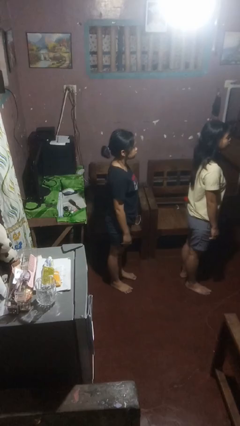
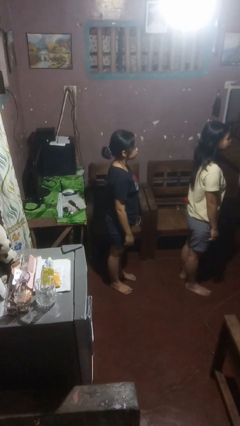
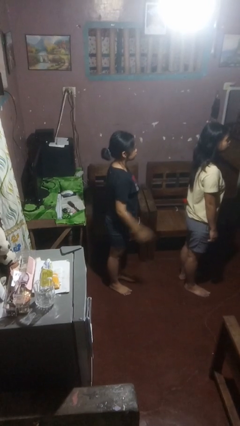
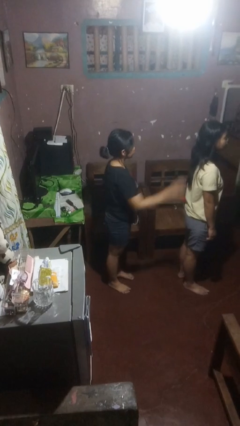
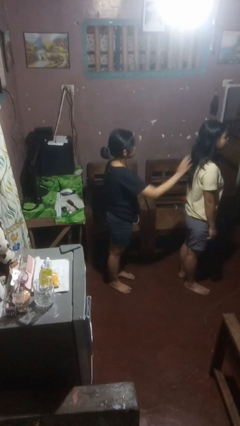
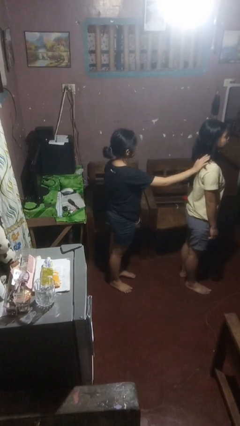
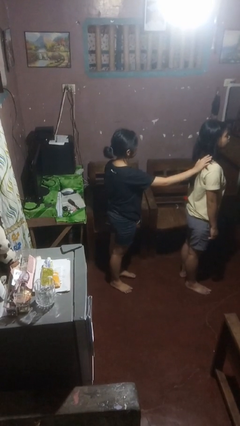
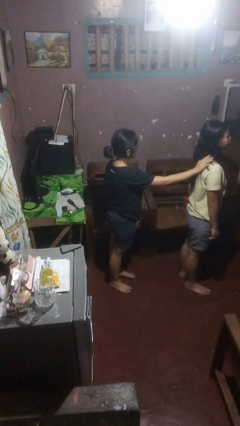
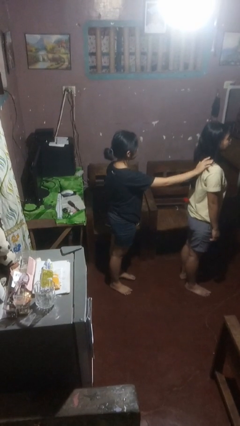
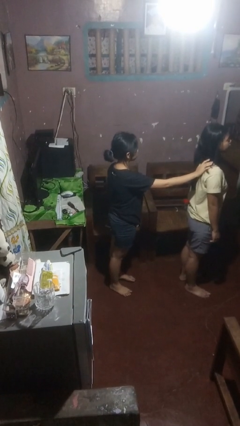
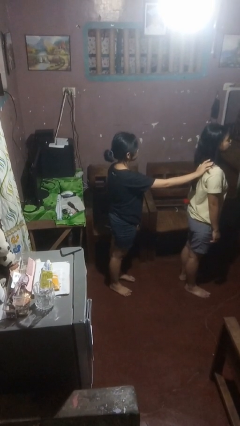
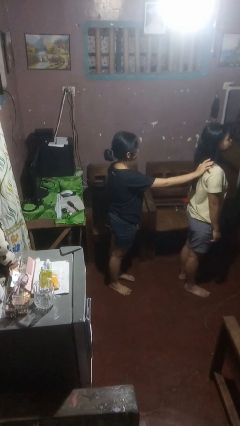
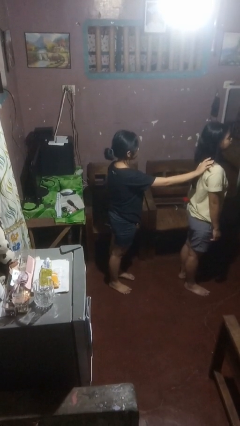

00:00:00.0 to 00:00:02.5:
person touches back of person

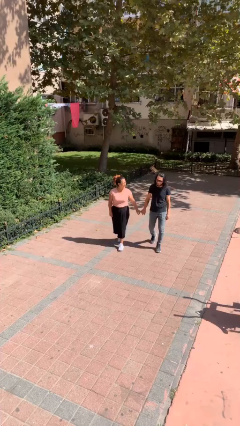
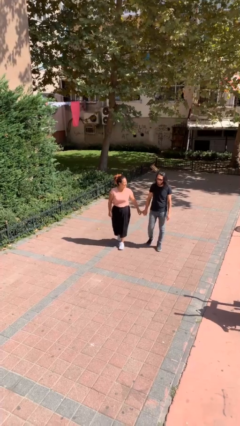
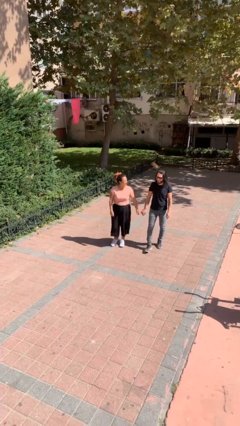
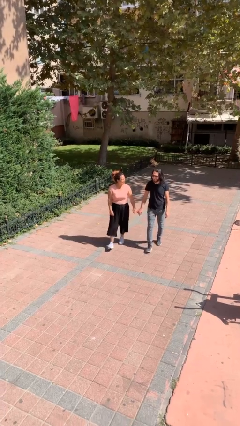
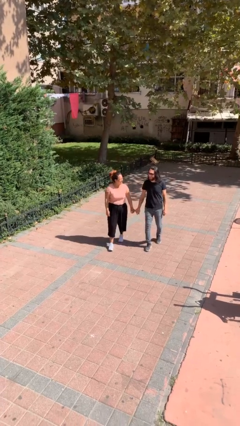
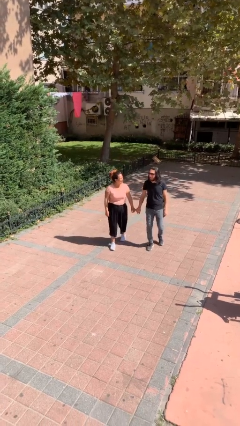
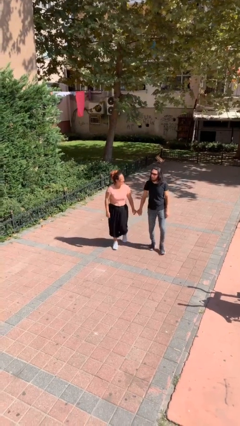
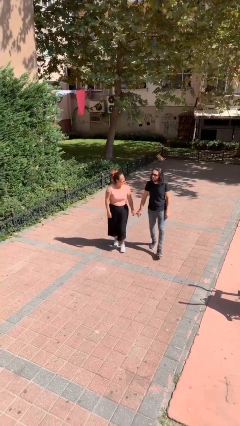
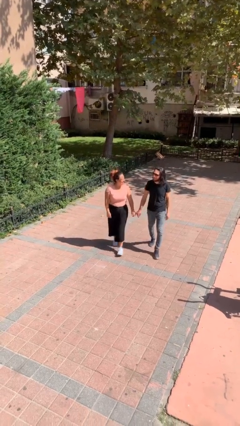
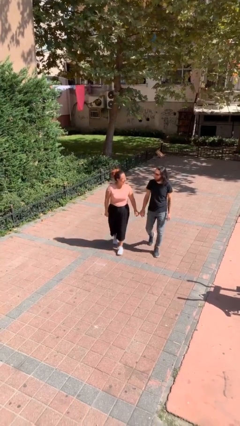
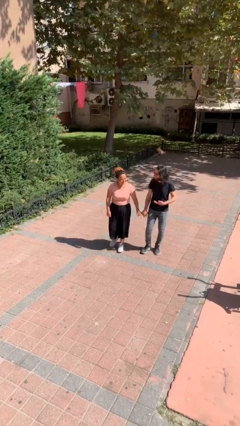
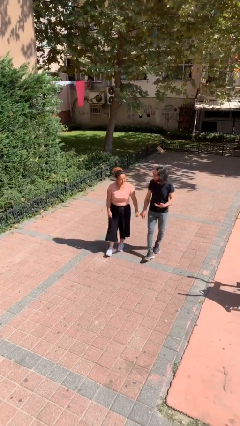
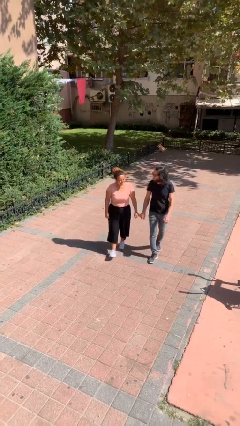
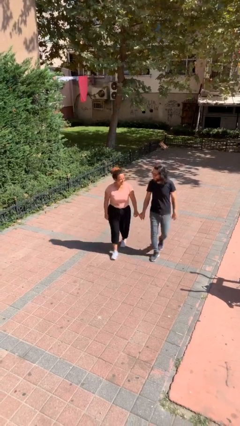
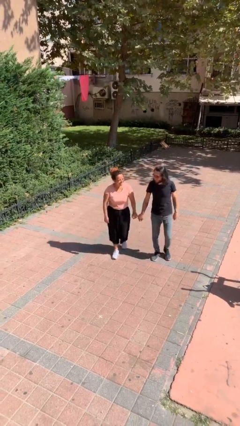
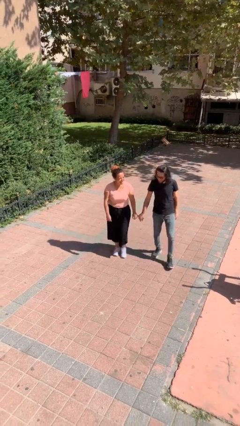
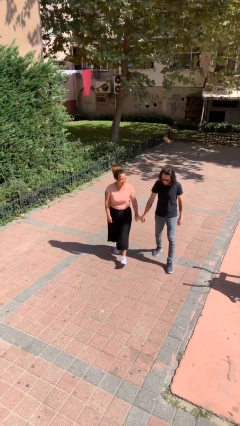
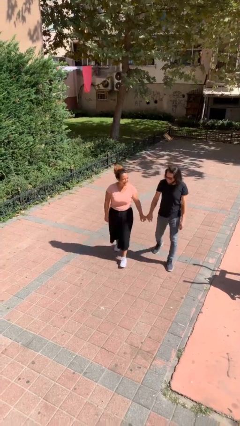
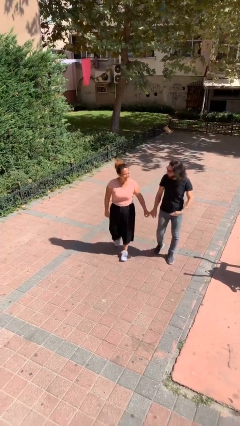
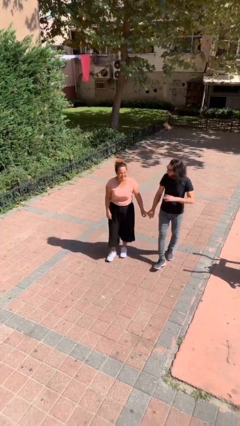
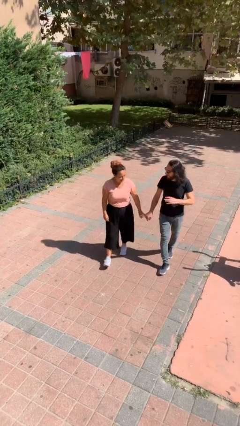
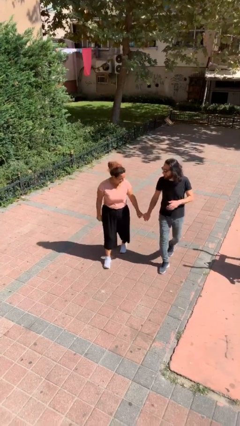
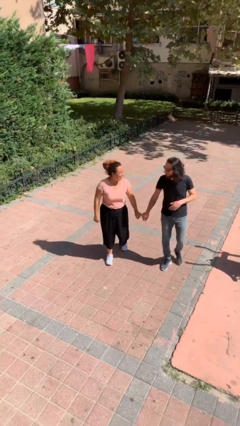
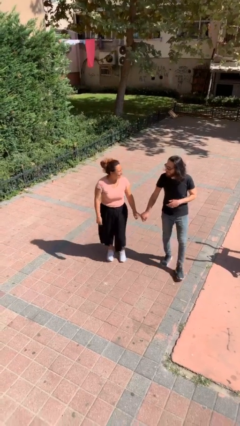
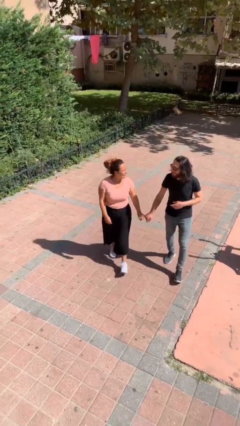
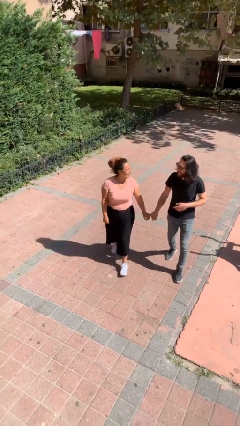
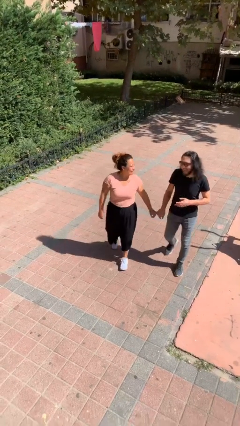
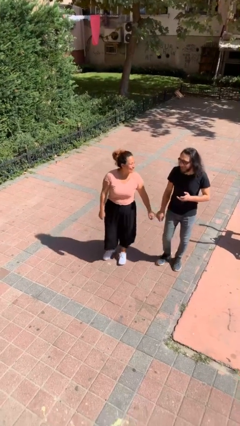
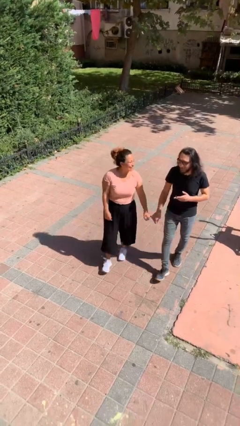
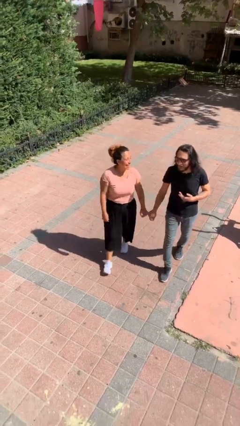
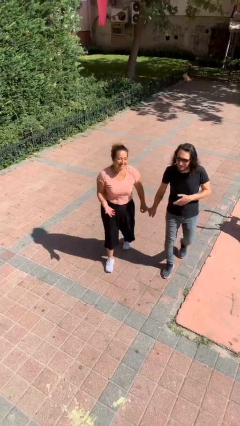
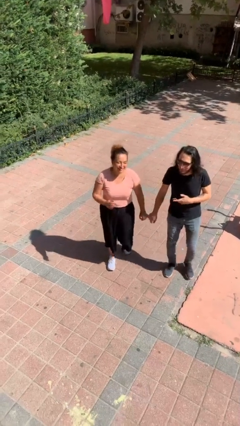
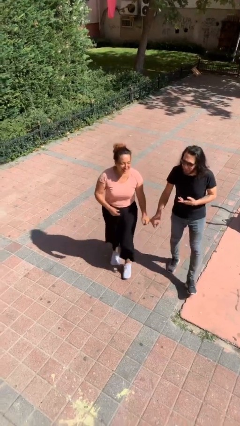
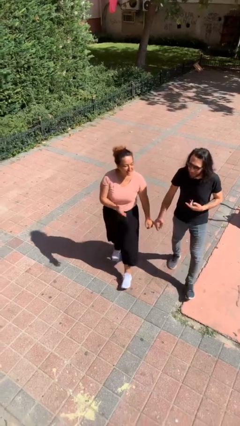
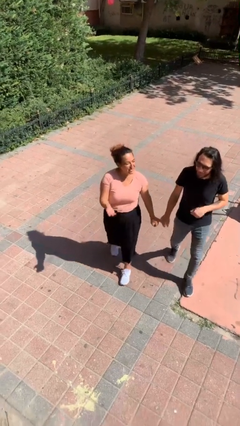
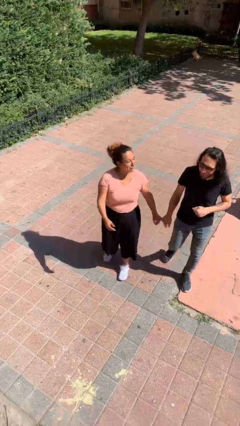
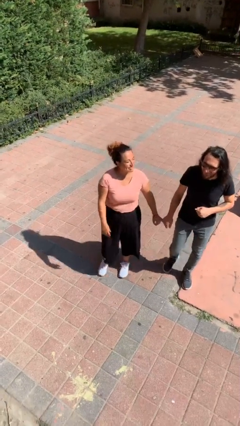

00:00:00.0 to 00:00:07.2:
person holds hand

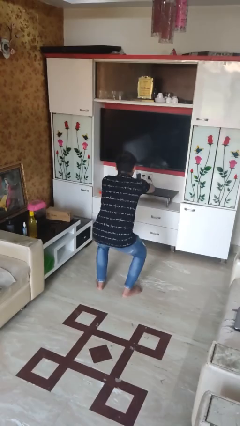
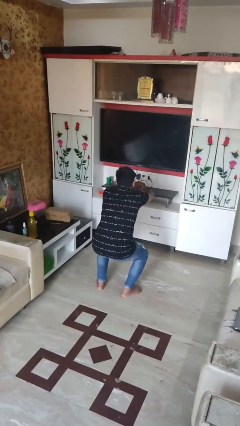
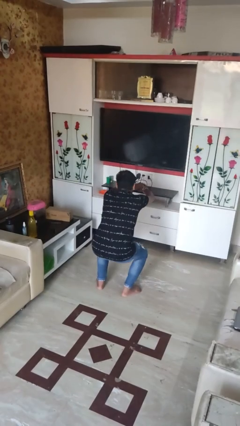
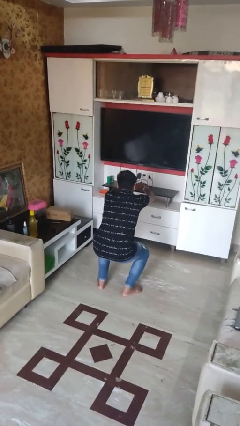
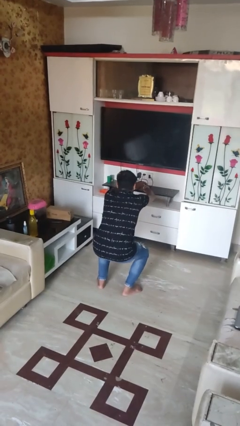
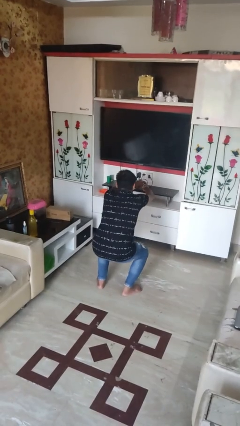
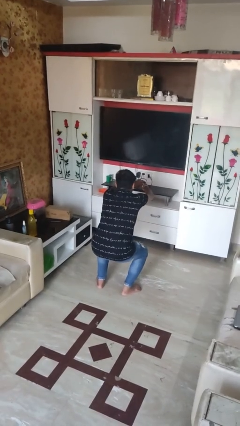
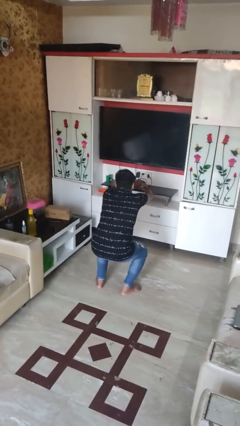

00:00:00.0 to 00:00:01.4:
person squats

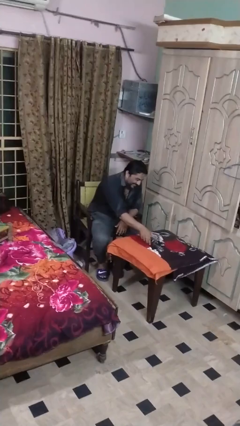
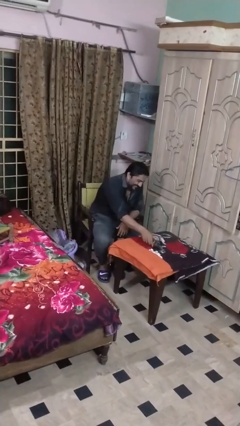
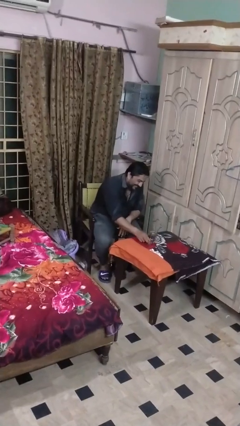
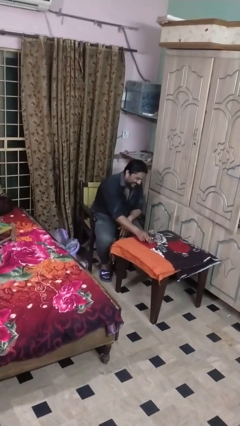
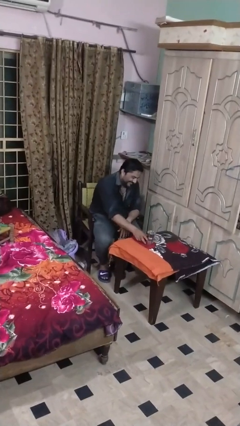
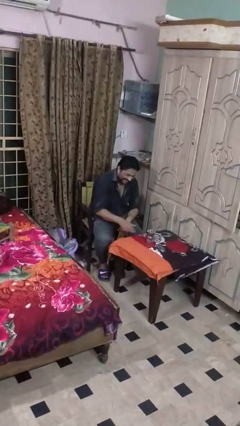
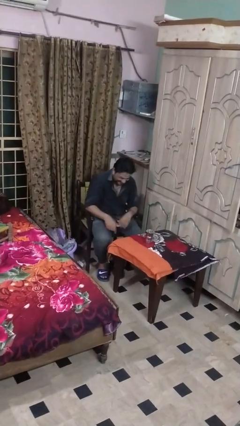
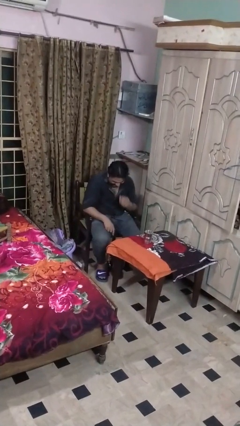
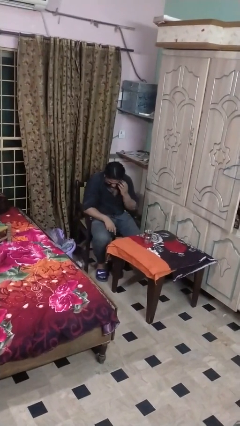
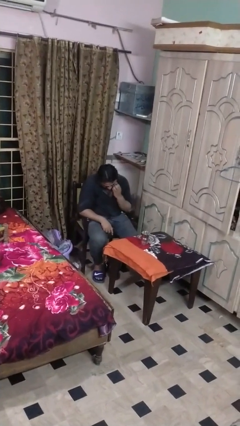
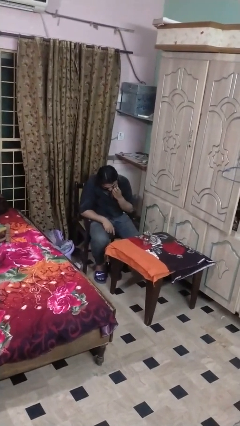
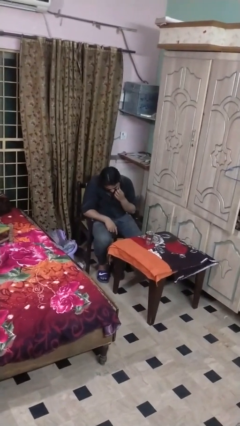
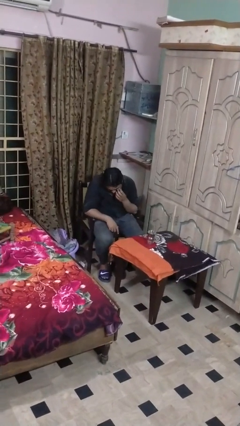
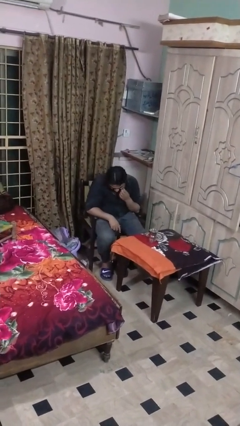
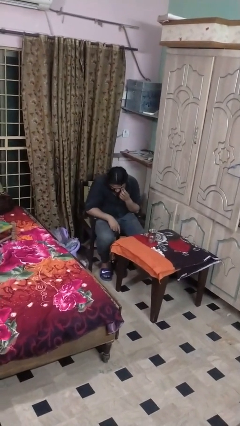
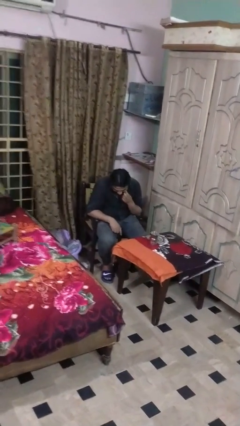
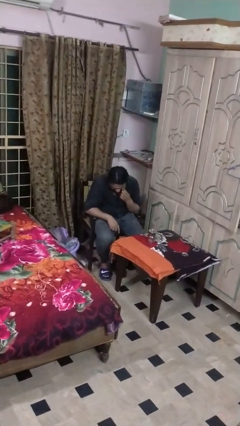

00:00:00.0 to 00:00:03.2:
person sets upright glass

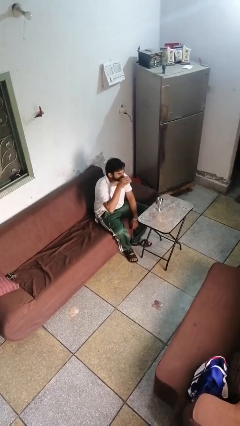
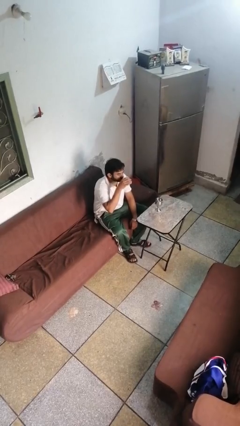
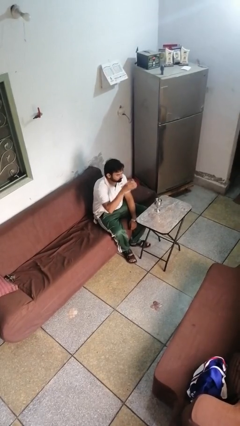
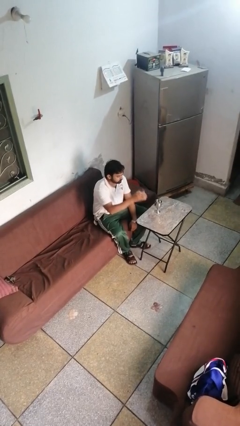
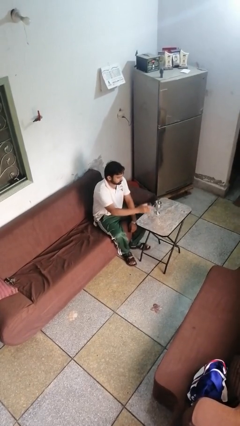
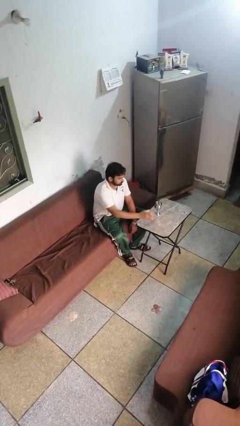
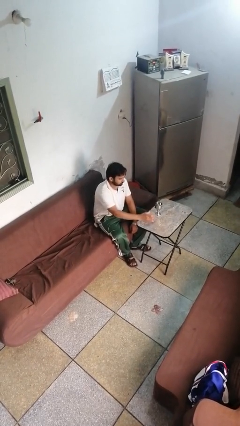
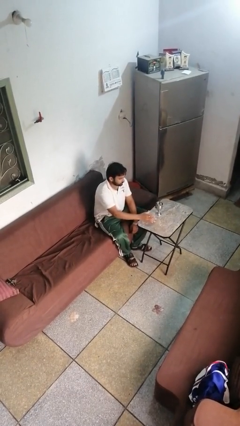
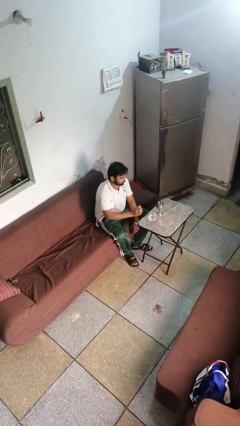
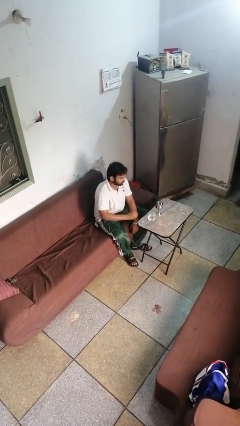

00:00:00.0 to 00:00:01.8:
person puts down object on table

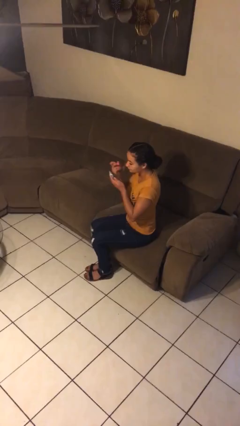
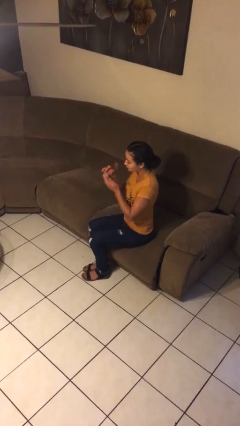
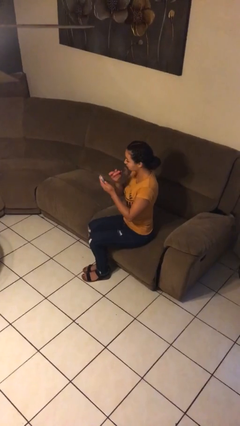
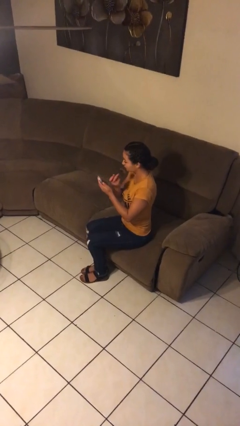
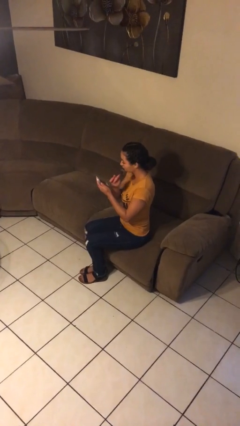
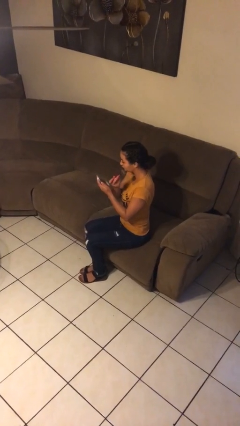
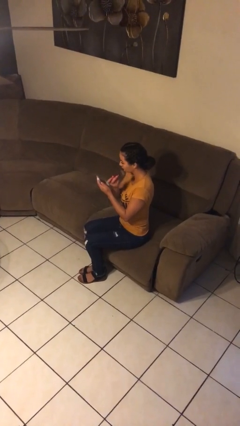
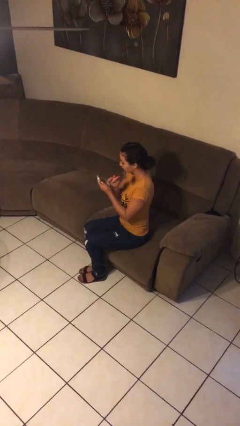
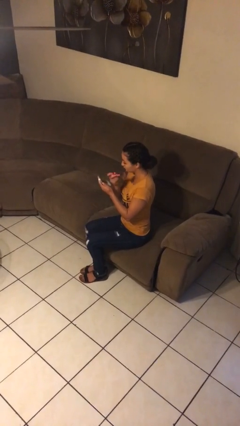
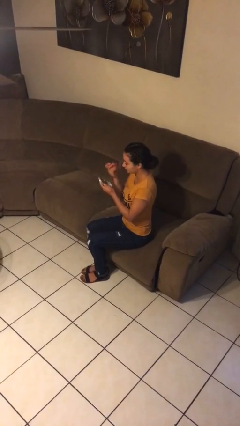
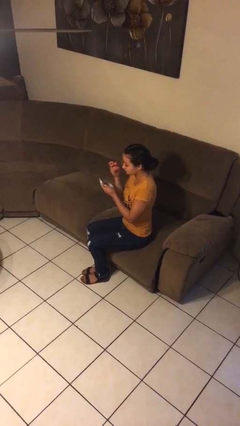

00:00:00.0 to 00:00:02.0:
person applies foundation makeup
